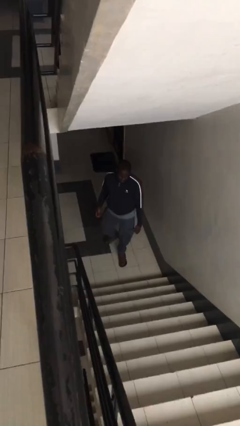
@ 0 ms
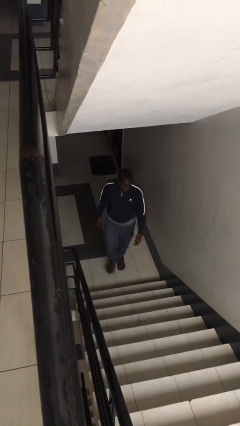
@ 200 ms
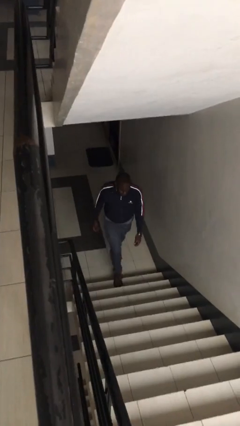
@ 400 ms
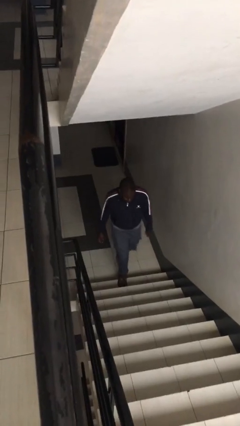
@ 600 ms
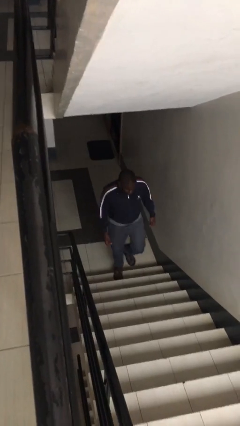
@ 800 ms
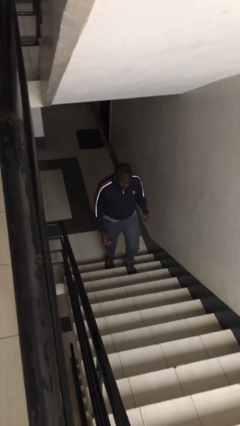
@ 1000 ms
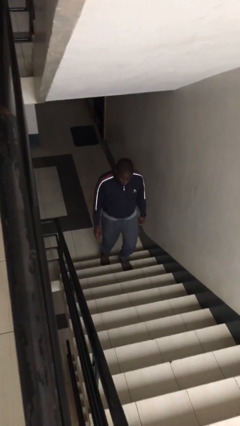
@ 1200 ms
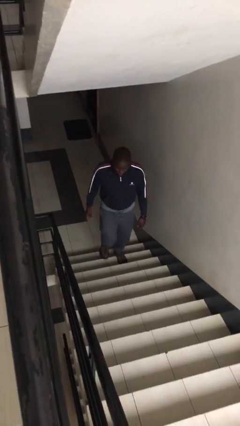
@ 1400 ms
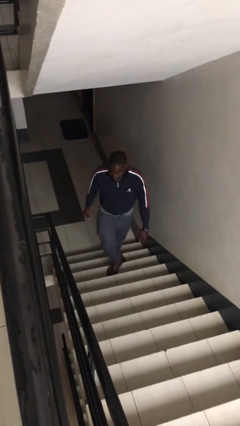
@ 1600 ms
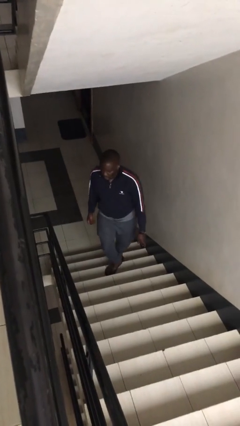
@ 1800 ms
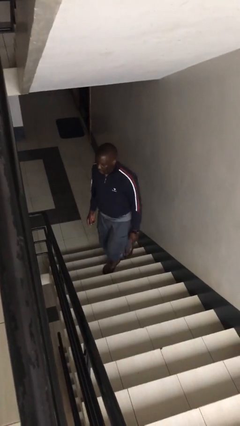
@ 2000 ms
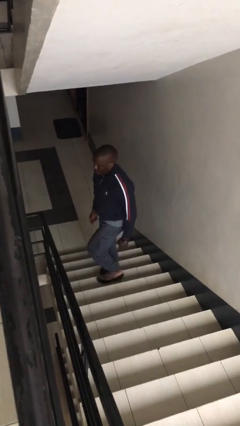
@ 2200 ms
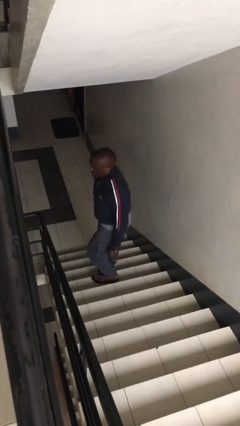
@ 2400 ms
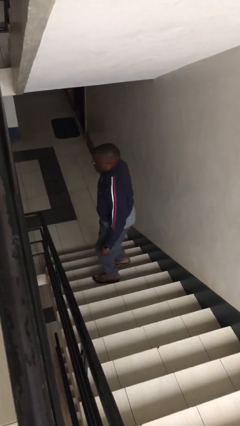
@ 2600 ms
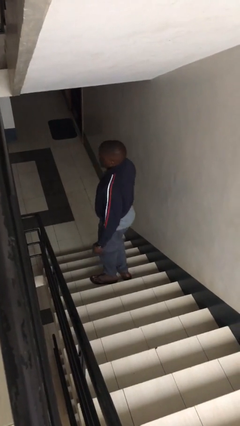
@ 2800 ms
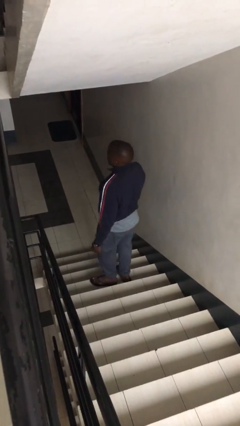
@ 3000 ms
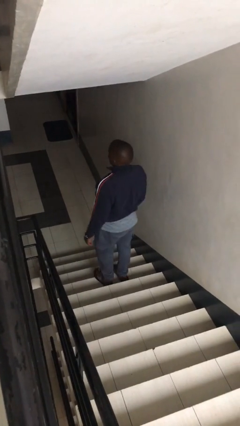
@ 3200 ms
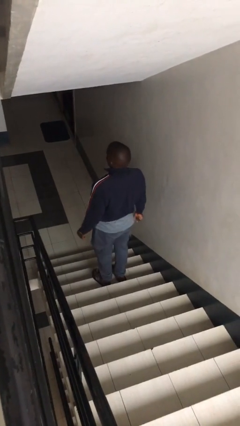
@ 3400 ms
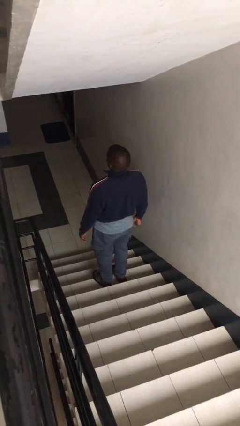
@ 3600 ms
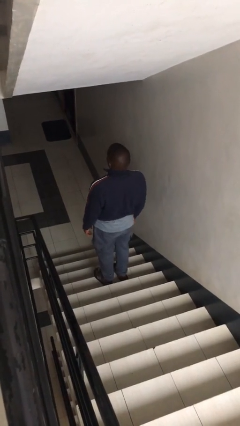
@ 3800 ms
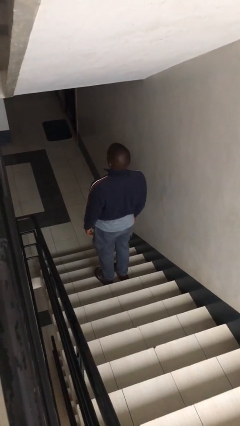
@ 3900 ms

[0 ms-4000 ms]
person climbs up stairs

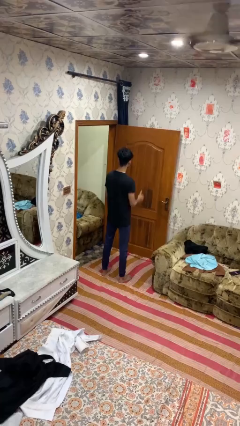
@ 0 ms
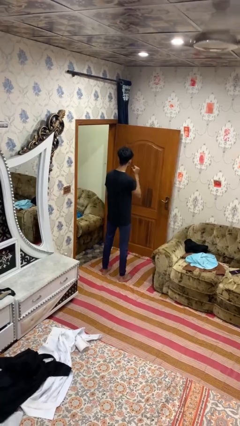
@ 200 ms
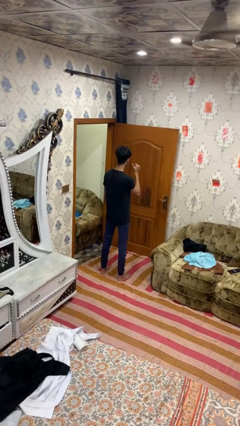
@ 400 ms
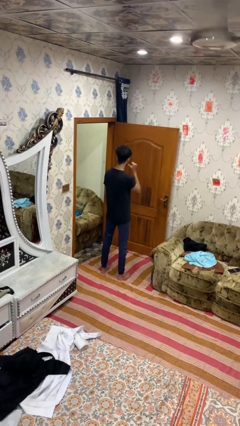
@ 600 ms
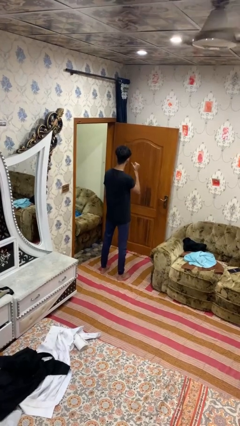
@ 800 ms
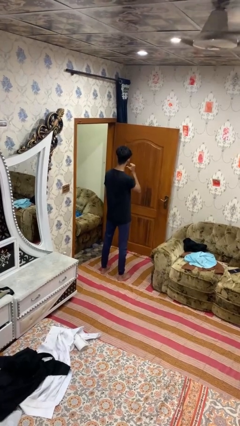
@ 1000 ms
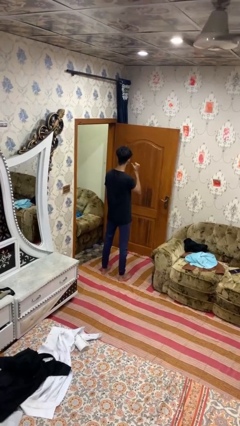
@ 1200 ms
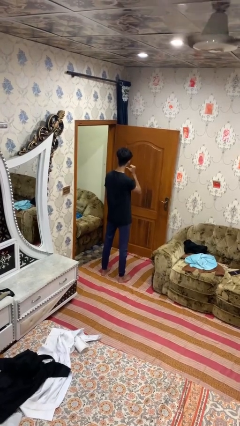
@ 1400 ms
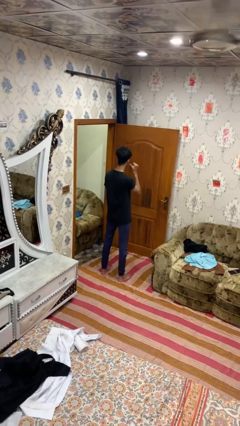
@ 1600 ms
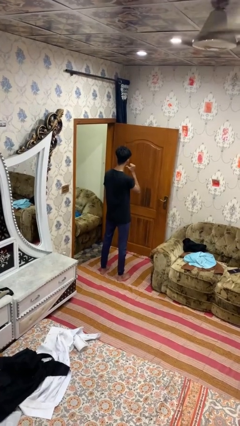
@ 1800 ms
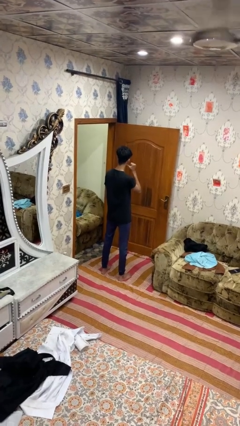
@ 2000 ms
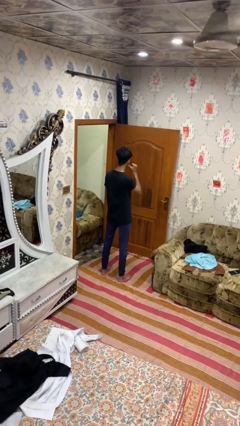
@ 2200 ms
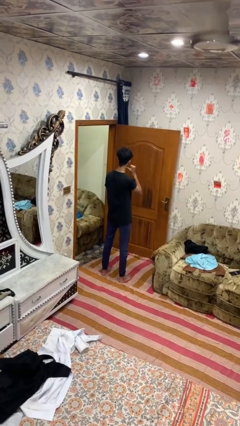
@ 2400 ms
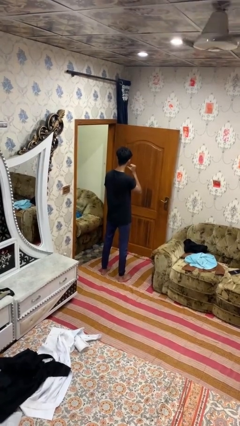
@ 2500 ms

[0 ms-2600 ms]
person gestures behind me

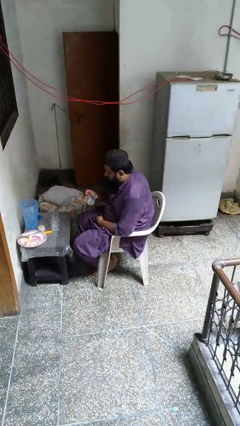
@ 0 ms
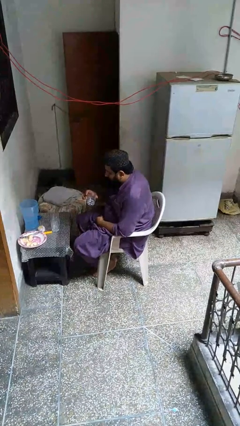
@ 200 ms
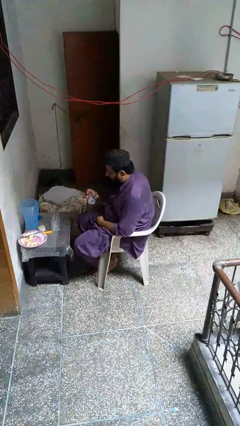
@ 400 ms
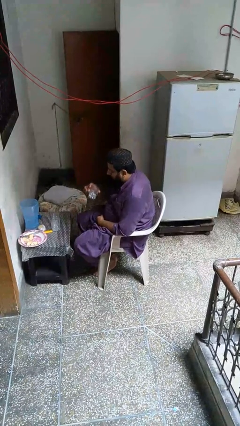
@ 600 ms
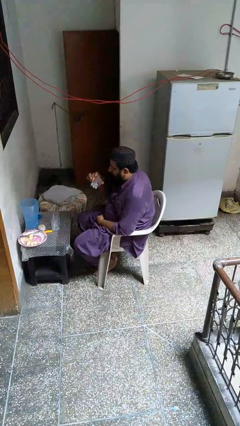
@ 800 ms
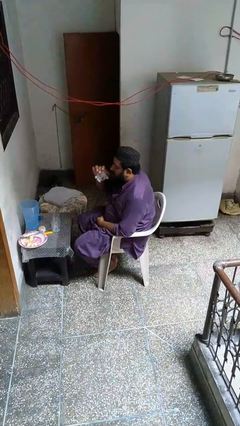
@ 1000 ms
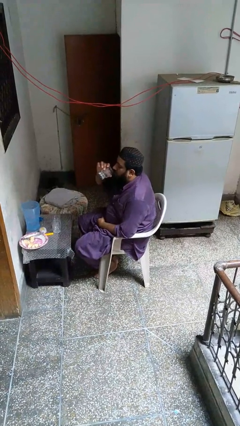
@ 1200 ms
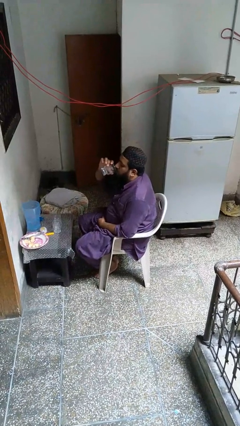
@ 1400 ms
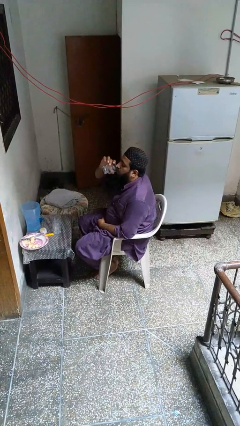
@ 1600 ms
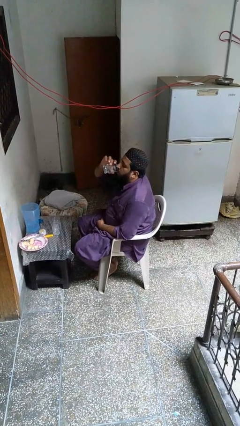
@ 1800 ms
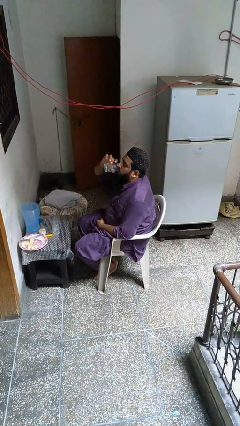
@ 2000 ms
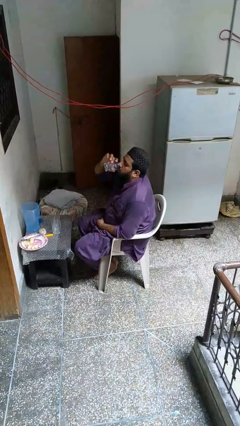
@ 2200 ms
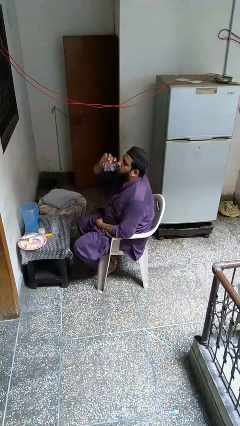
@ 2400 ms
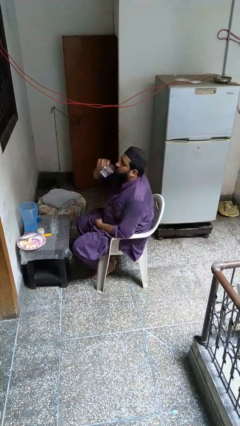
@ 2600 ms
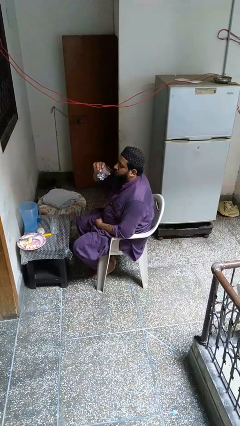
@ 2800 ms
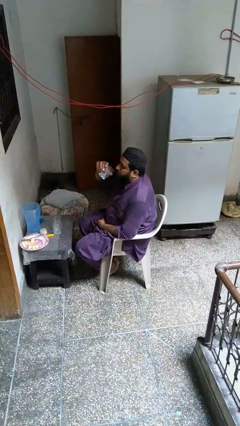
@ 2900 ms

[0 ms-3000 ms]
person drinks from shotglass

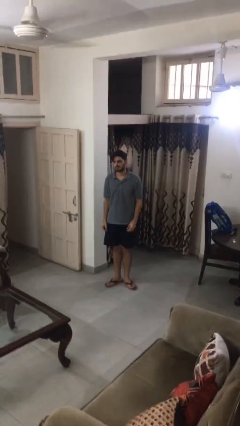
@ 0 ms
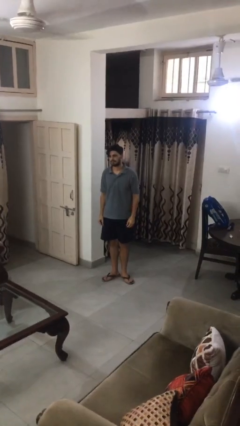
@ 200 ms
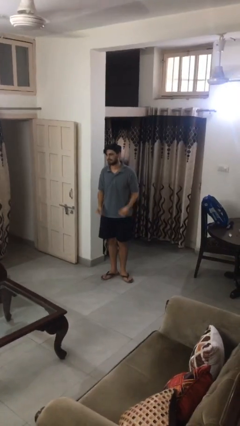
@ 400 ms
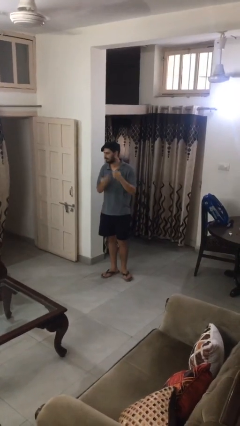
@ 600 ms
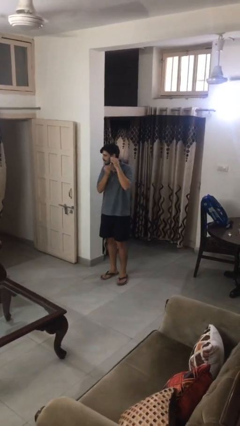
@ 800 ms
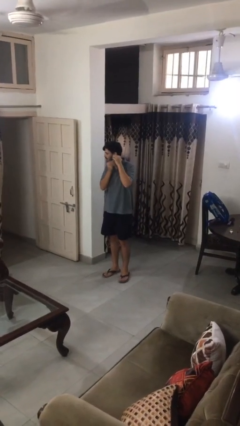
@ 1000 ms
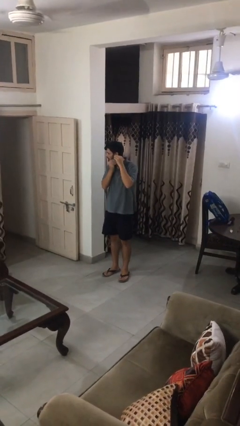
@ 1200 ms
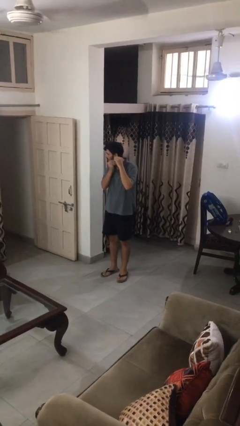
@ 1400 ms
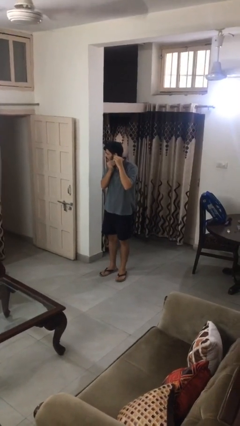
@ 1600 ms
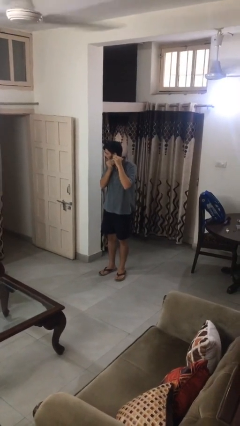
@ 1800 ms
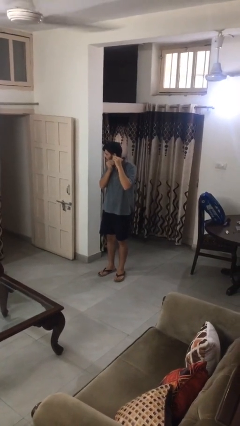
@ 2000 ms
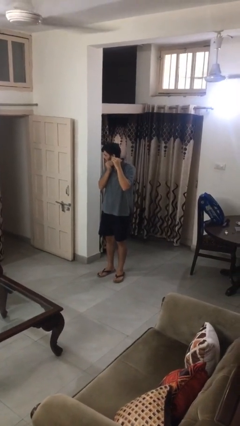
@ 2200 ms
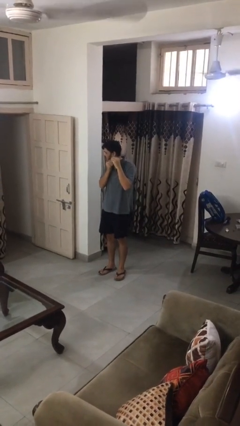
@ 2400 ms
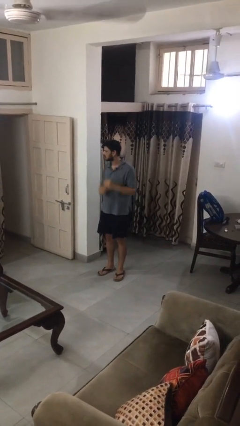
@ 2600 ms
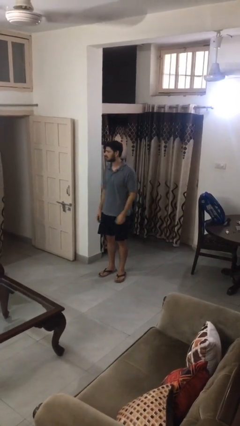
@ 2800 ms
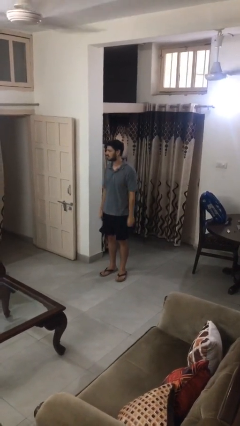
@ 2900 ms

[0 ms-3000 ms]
person puts on earrings

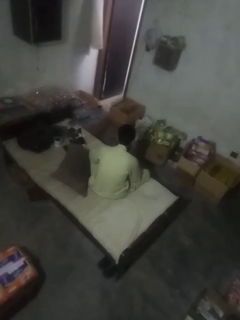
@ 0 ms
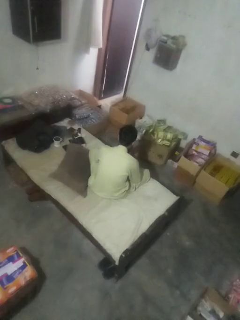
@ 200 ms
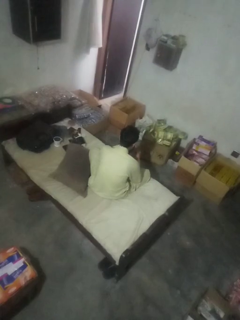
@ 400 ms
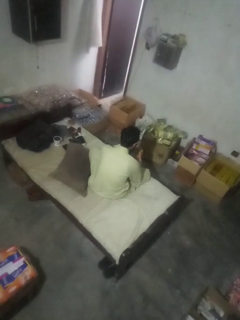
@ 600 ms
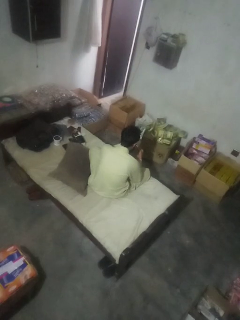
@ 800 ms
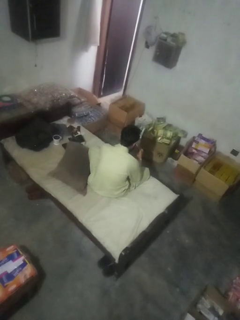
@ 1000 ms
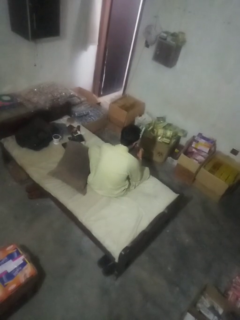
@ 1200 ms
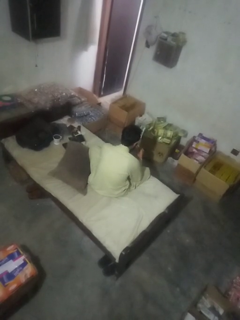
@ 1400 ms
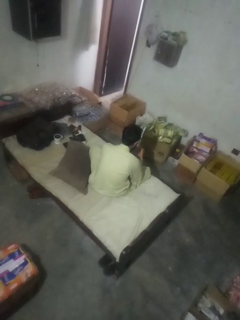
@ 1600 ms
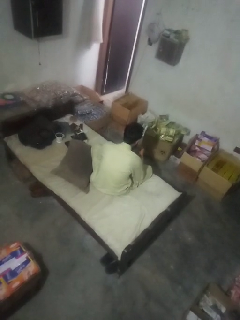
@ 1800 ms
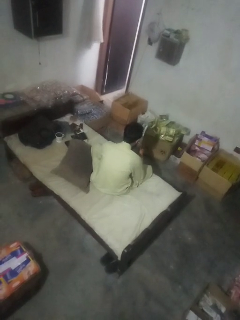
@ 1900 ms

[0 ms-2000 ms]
person paints fingernails

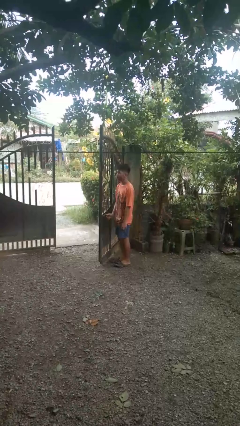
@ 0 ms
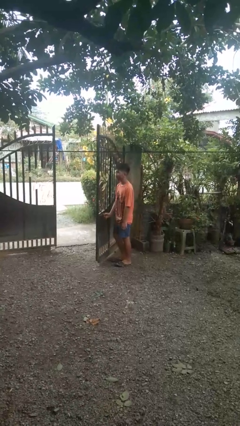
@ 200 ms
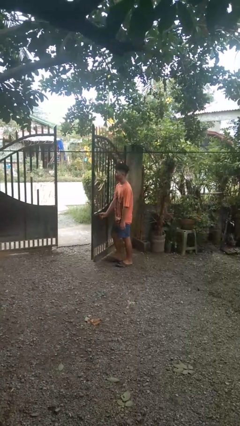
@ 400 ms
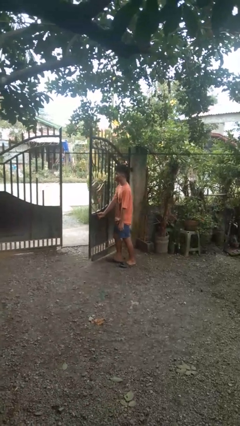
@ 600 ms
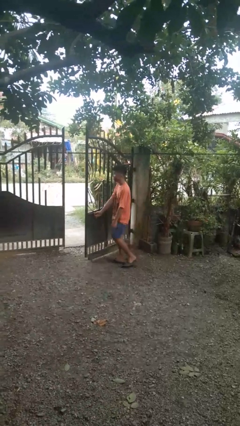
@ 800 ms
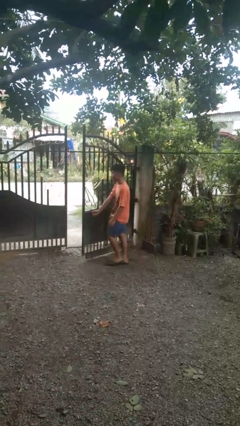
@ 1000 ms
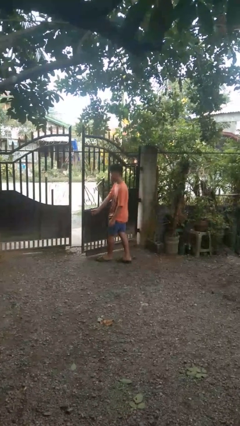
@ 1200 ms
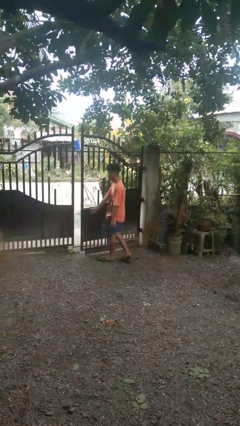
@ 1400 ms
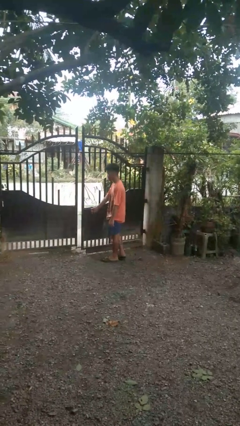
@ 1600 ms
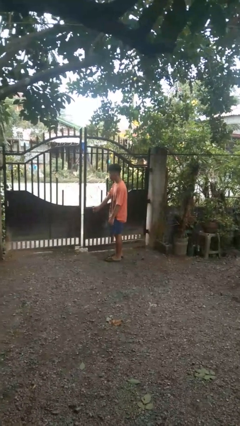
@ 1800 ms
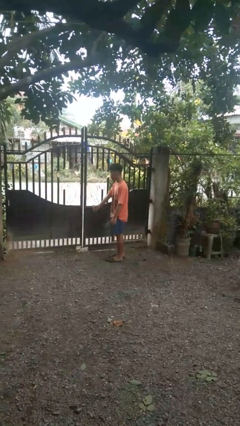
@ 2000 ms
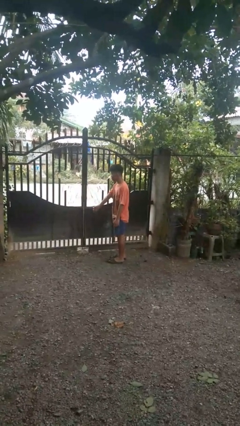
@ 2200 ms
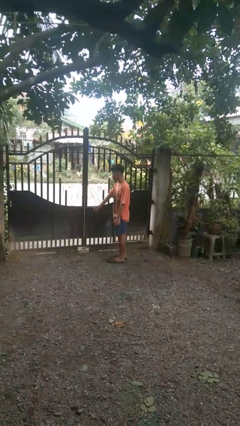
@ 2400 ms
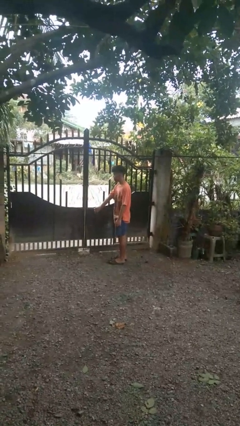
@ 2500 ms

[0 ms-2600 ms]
person closes gate
